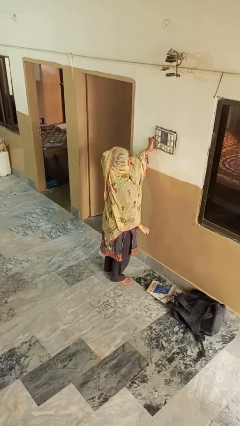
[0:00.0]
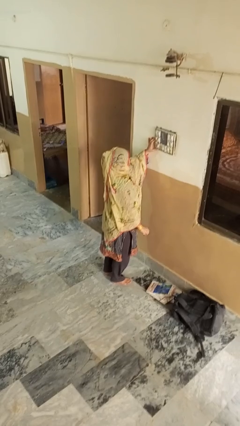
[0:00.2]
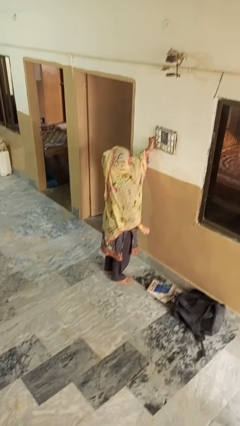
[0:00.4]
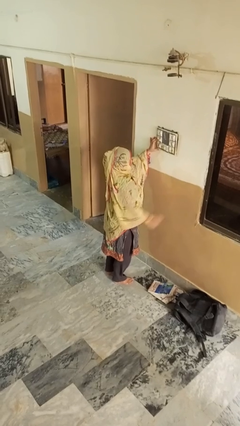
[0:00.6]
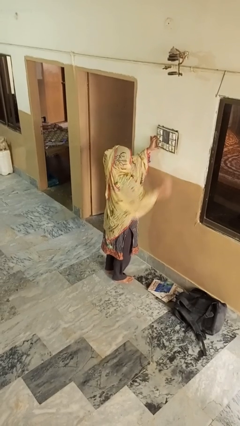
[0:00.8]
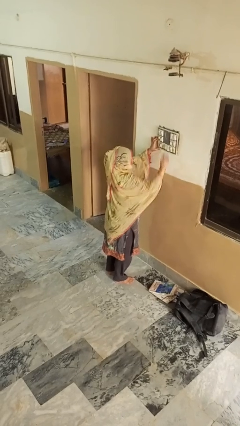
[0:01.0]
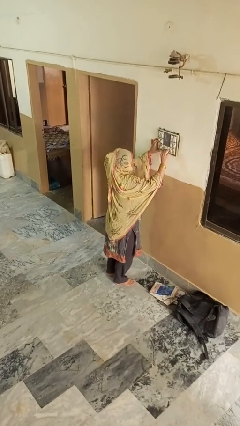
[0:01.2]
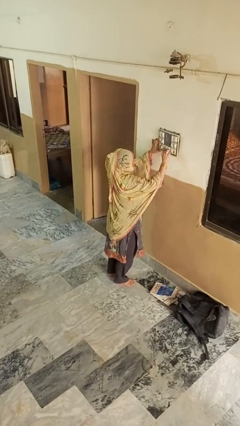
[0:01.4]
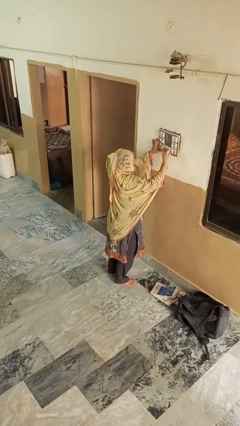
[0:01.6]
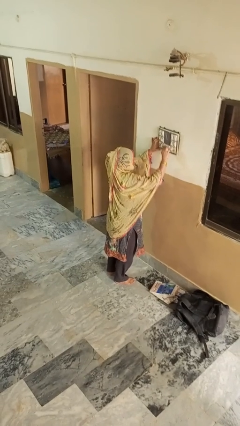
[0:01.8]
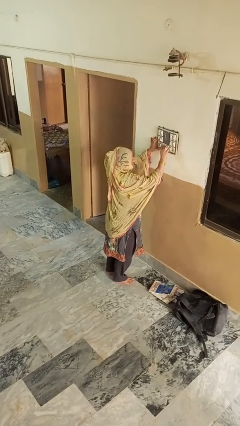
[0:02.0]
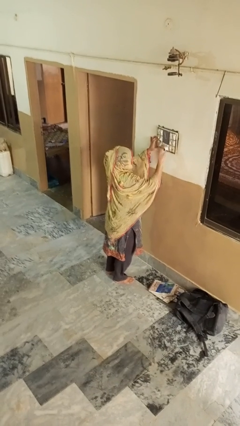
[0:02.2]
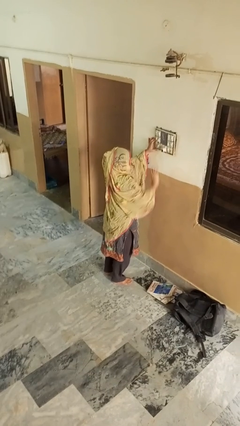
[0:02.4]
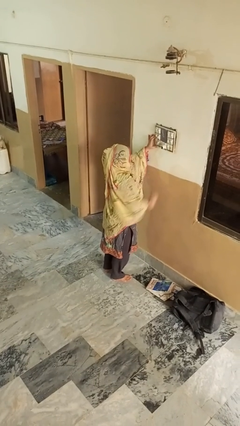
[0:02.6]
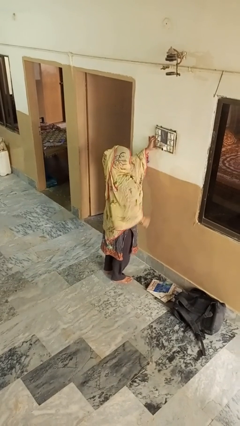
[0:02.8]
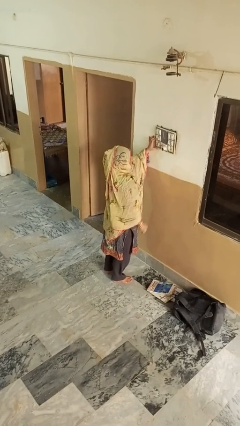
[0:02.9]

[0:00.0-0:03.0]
person plugs into electrical socket

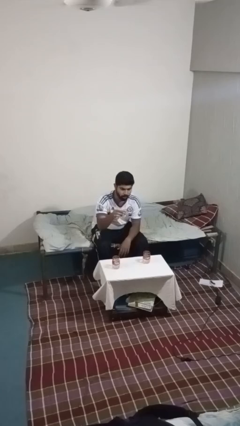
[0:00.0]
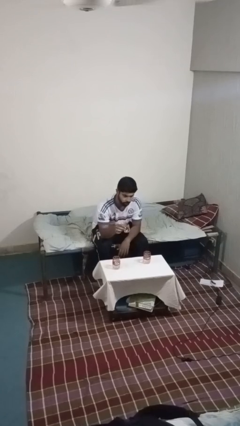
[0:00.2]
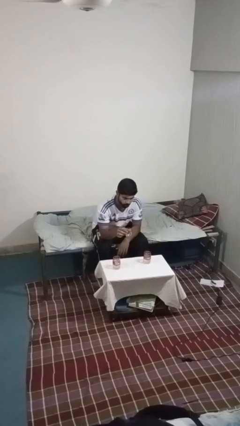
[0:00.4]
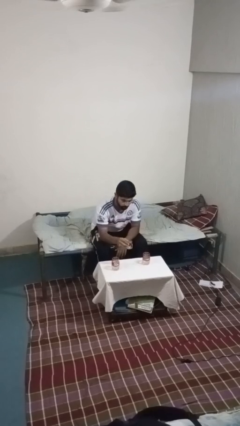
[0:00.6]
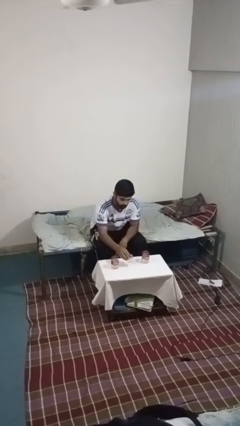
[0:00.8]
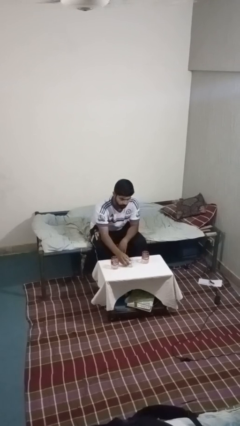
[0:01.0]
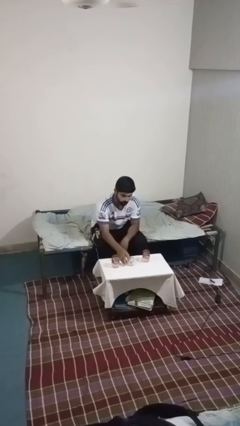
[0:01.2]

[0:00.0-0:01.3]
person puts down object on table

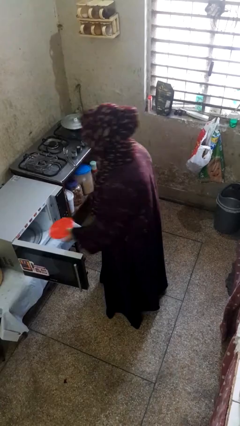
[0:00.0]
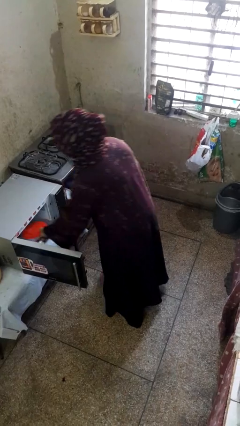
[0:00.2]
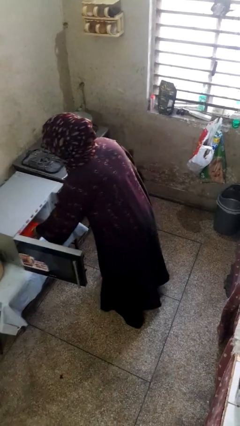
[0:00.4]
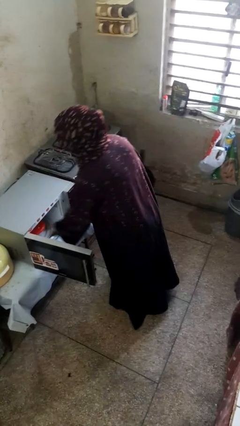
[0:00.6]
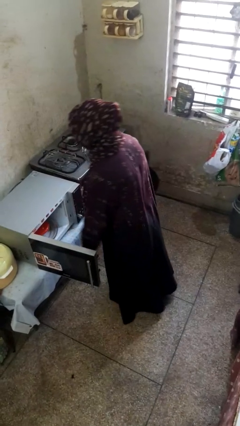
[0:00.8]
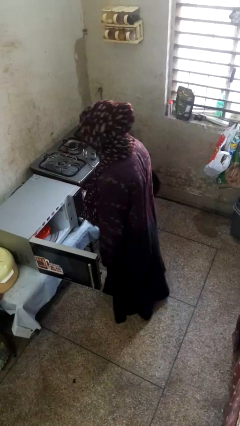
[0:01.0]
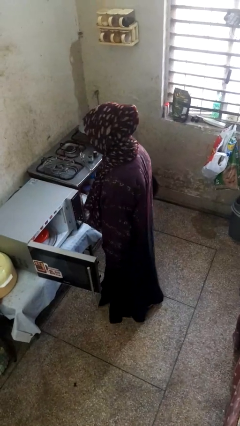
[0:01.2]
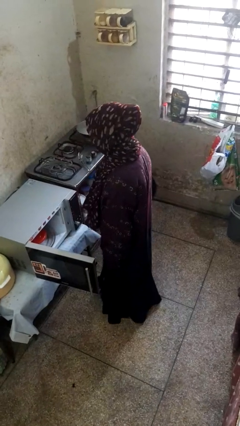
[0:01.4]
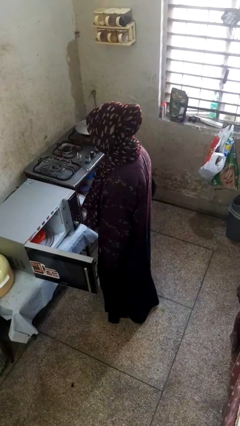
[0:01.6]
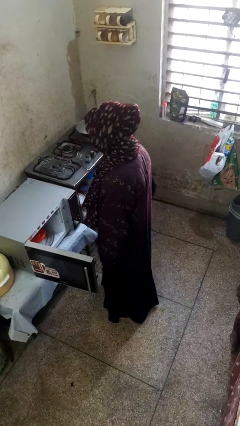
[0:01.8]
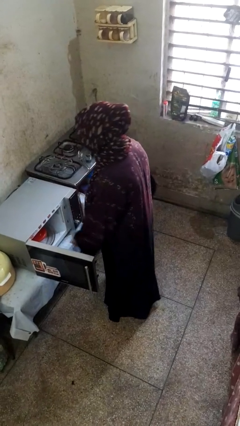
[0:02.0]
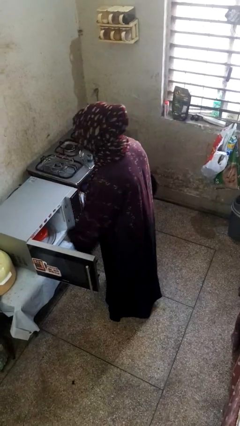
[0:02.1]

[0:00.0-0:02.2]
person puts object into microwave

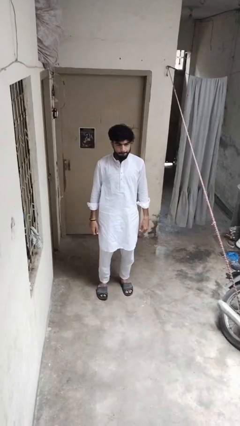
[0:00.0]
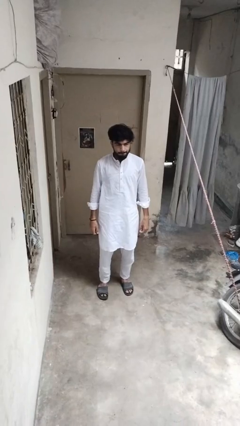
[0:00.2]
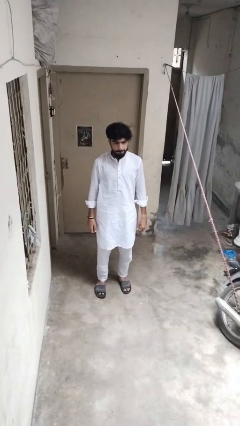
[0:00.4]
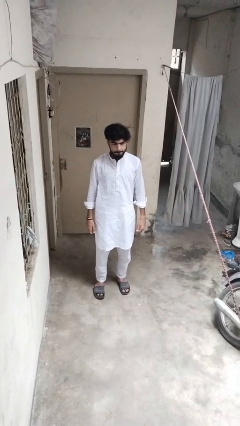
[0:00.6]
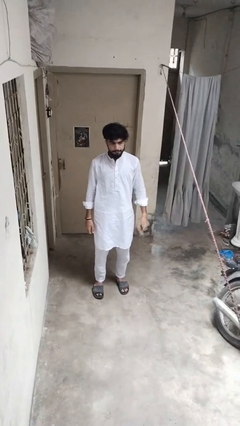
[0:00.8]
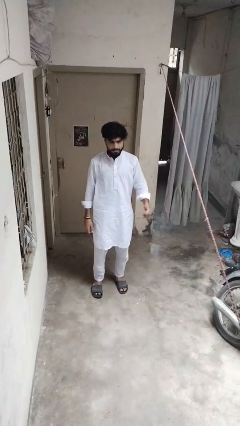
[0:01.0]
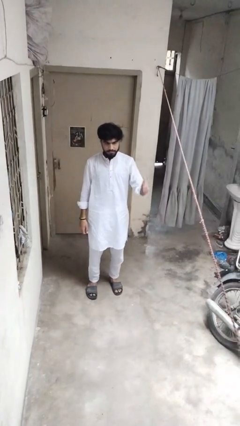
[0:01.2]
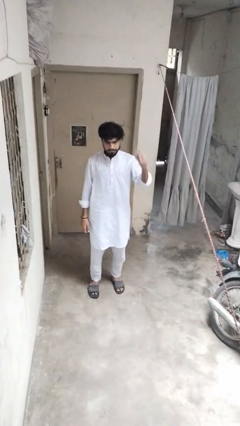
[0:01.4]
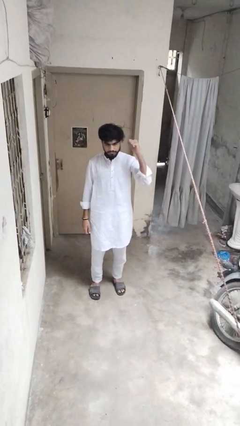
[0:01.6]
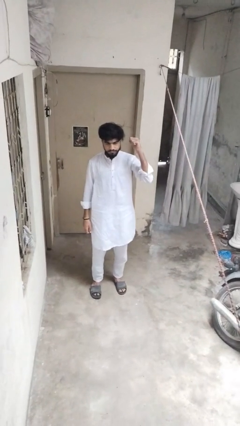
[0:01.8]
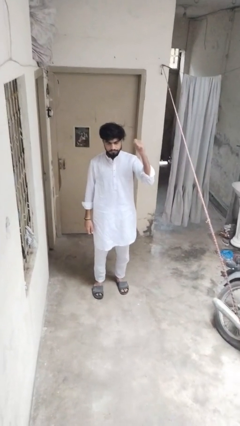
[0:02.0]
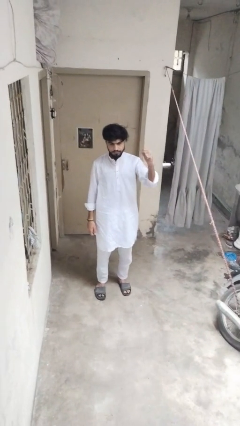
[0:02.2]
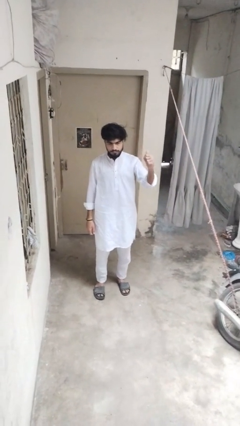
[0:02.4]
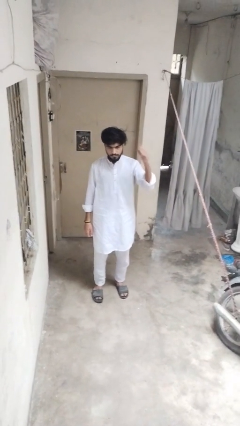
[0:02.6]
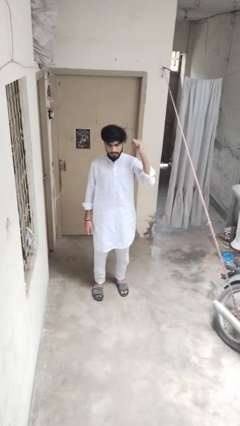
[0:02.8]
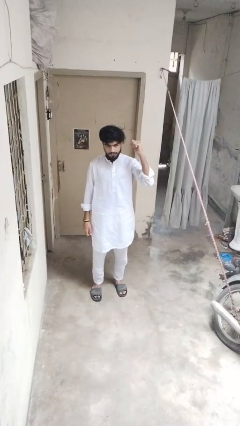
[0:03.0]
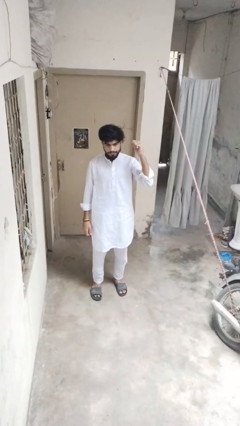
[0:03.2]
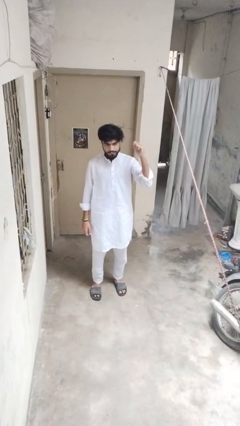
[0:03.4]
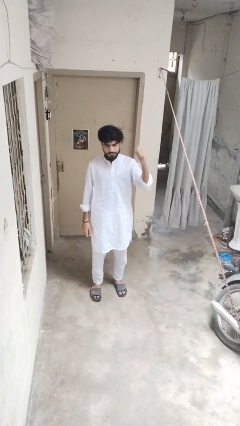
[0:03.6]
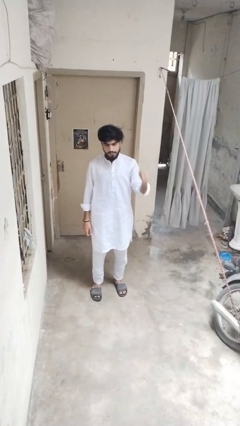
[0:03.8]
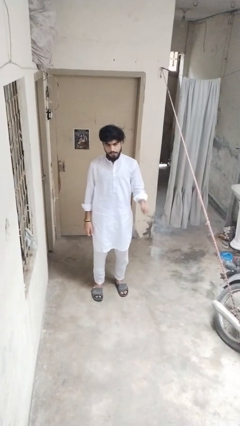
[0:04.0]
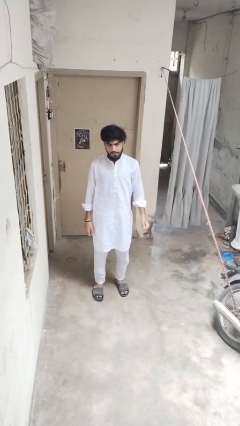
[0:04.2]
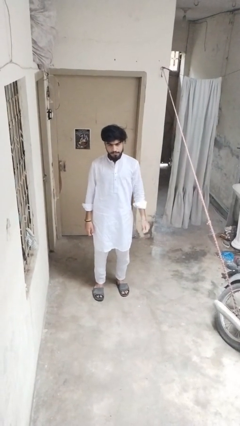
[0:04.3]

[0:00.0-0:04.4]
person gestures behind me

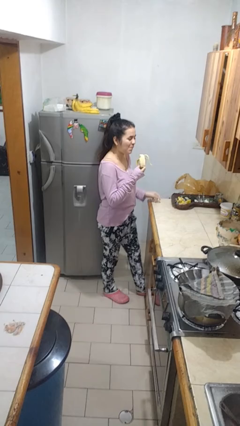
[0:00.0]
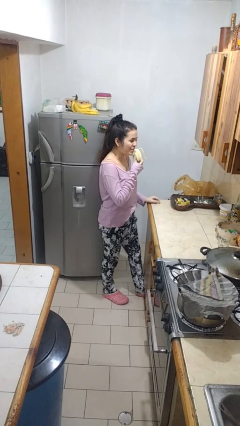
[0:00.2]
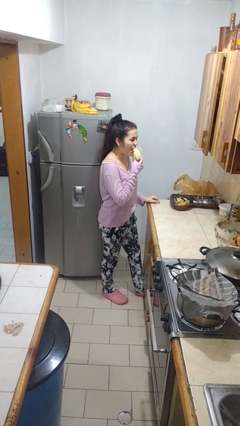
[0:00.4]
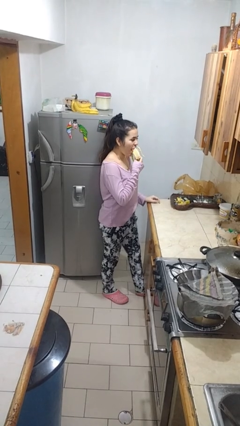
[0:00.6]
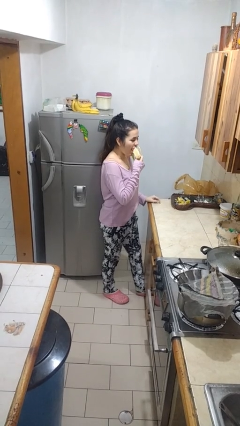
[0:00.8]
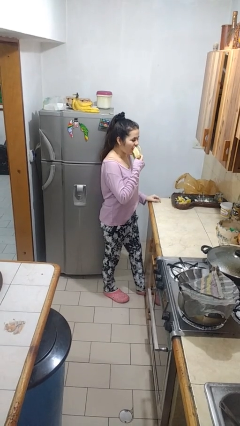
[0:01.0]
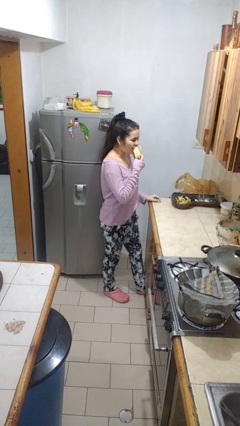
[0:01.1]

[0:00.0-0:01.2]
person eats banana

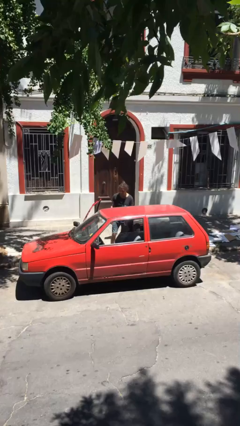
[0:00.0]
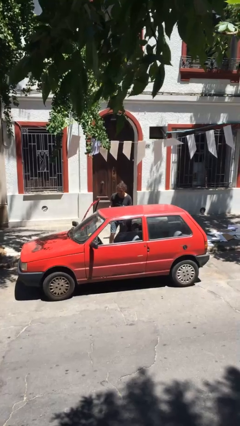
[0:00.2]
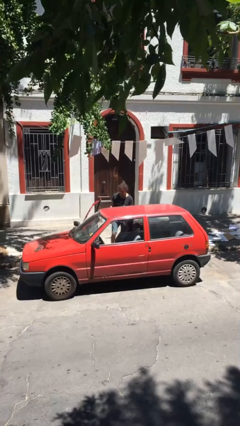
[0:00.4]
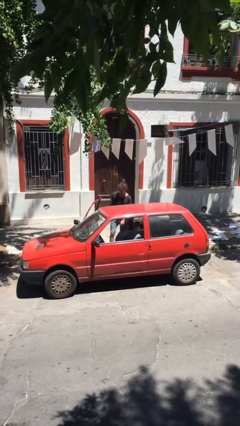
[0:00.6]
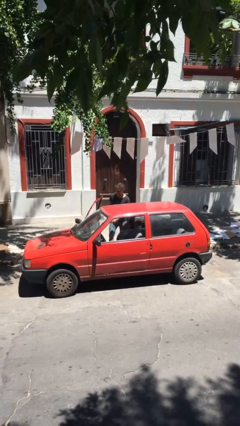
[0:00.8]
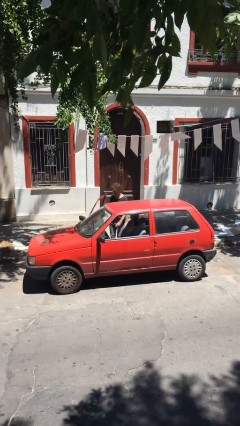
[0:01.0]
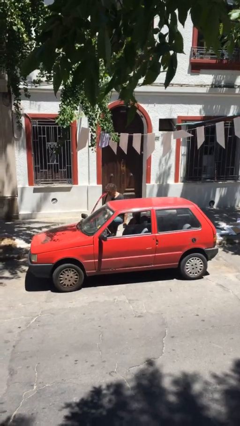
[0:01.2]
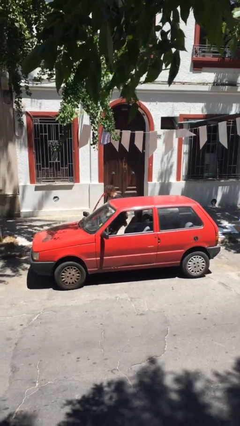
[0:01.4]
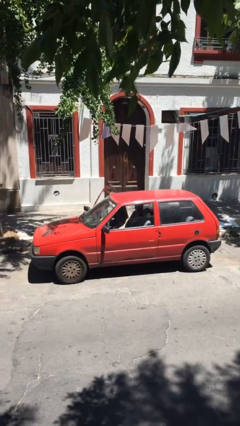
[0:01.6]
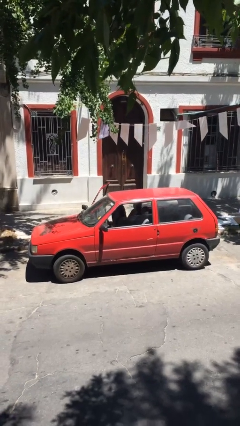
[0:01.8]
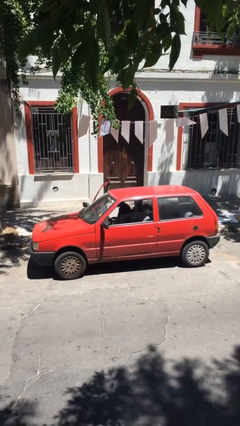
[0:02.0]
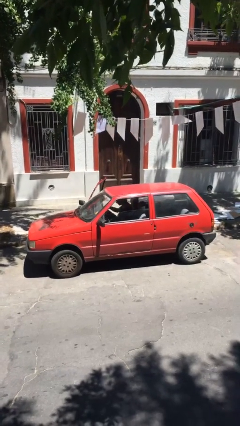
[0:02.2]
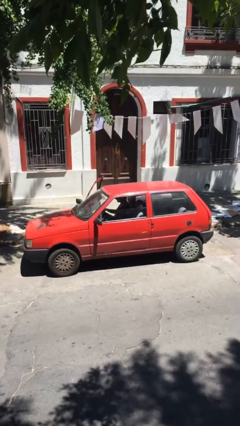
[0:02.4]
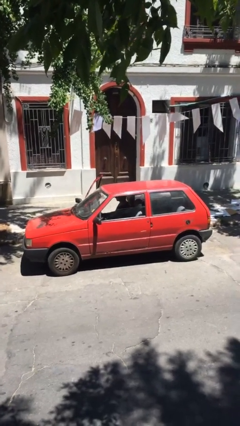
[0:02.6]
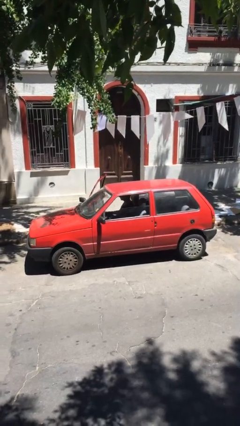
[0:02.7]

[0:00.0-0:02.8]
person enters car

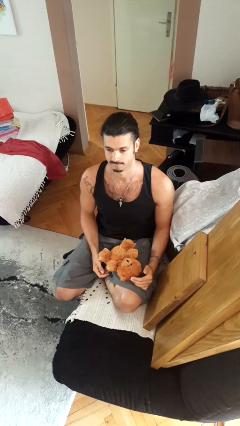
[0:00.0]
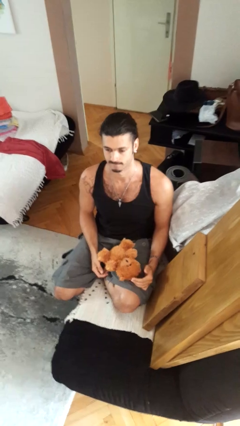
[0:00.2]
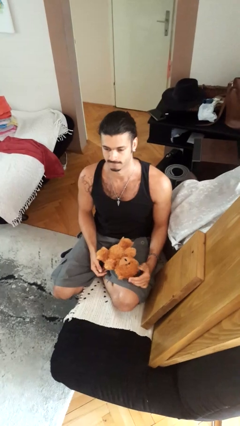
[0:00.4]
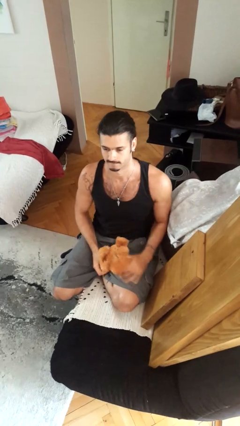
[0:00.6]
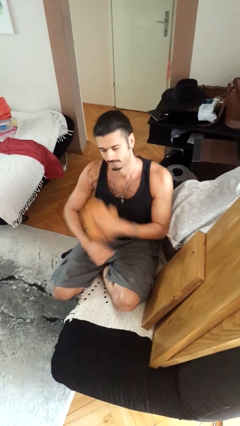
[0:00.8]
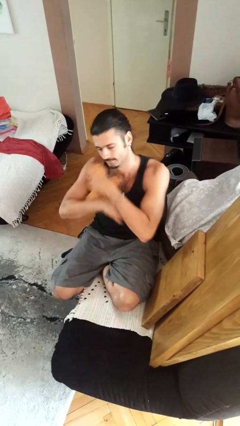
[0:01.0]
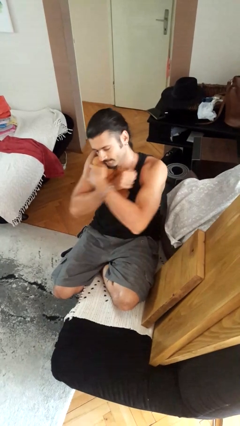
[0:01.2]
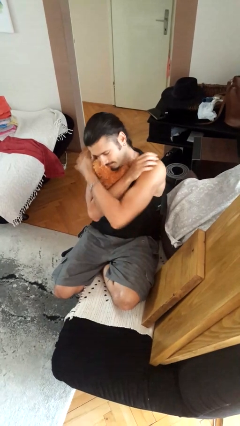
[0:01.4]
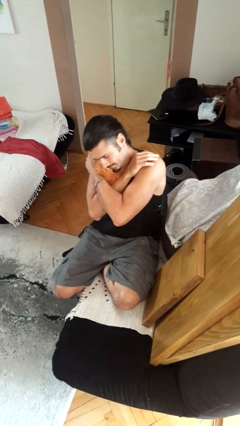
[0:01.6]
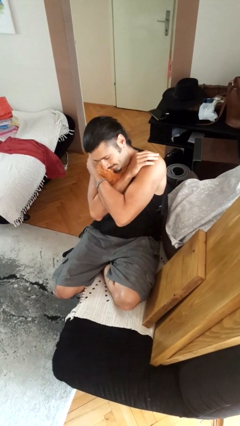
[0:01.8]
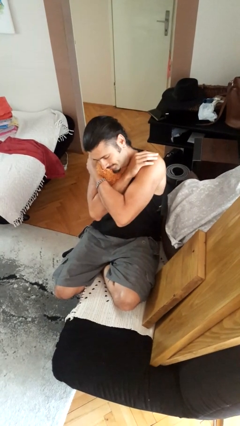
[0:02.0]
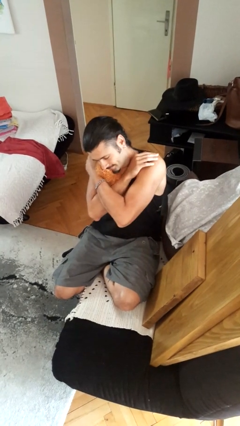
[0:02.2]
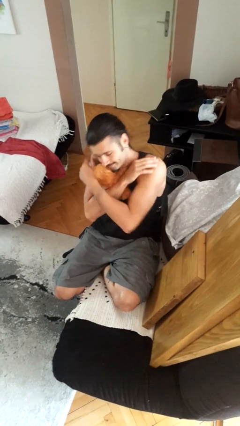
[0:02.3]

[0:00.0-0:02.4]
person hugs stuffed animal
